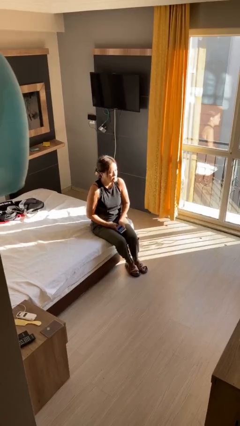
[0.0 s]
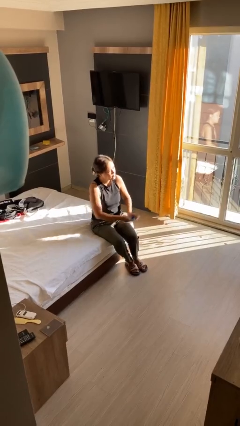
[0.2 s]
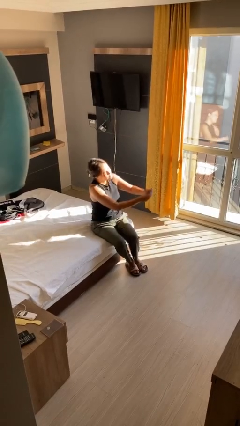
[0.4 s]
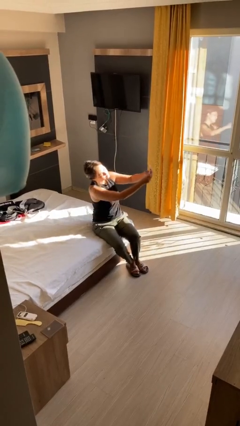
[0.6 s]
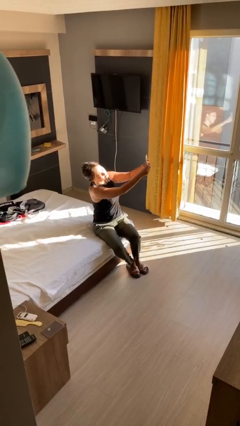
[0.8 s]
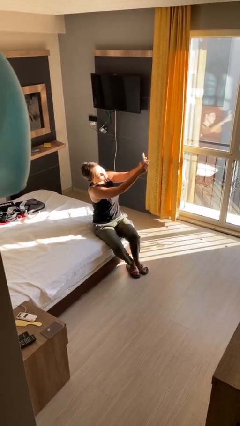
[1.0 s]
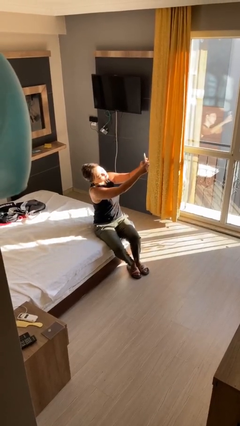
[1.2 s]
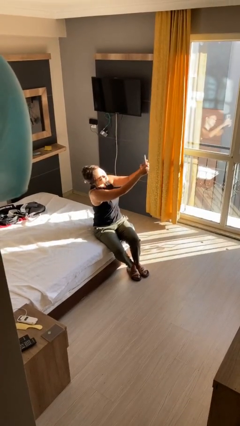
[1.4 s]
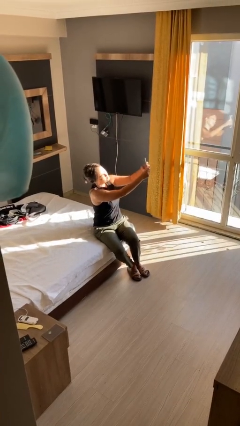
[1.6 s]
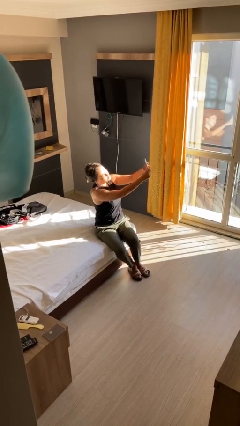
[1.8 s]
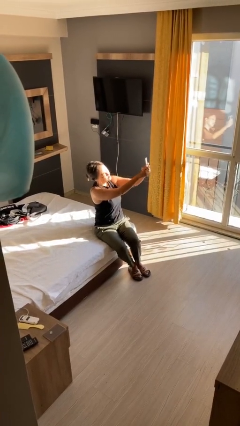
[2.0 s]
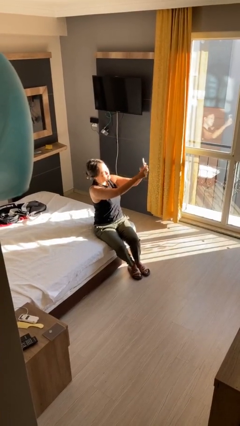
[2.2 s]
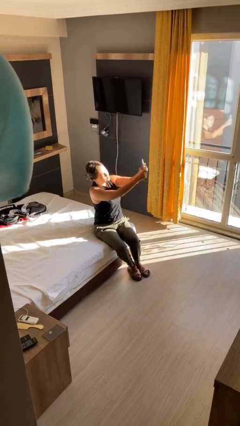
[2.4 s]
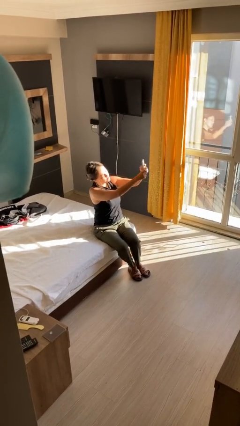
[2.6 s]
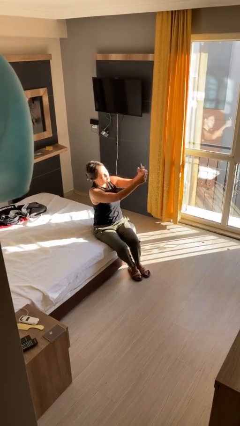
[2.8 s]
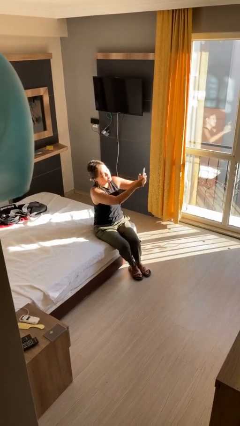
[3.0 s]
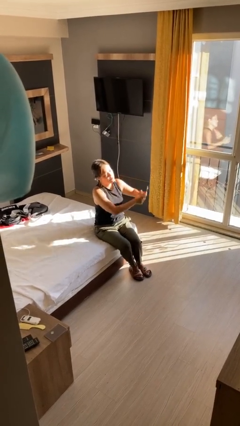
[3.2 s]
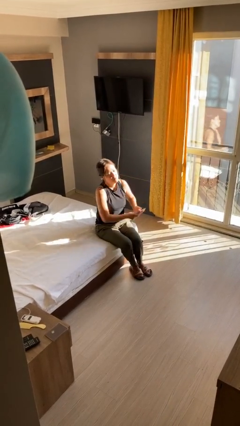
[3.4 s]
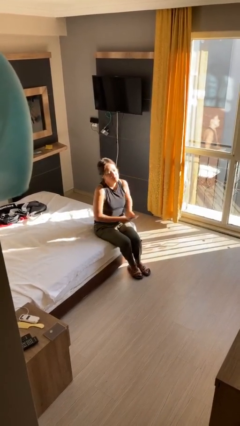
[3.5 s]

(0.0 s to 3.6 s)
person takes selfie

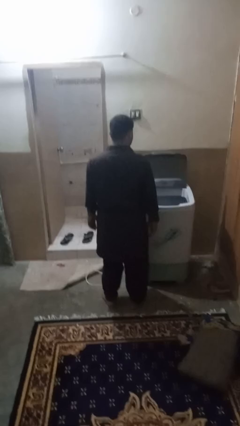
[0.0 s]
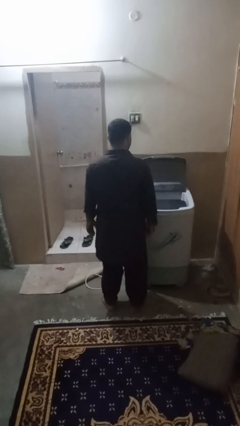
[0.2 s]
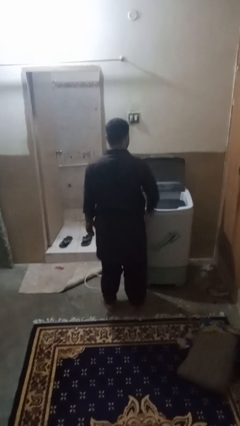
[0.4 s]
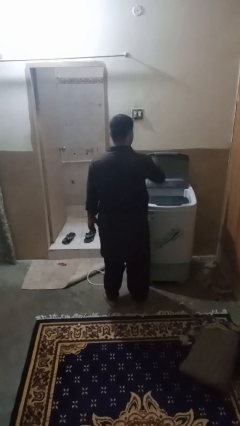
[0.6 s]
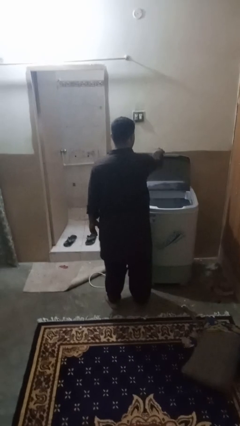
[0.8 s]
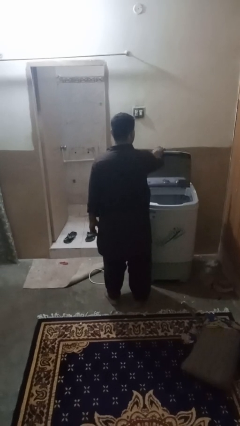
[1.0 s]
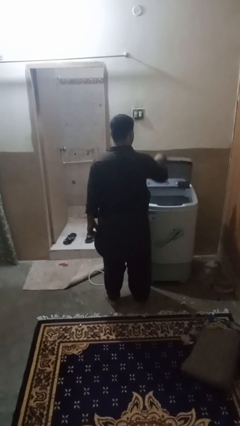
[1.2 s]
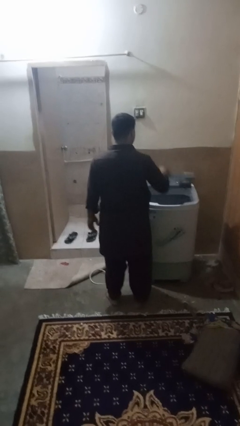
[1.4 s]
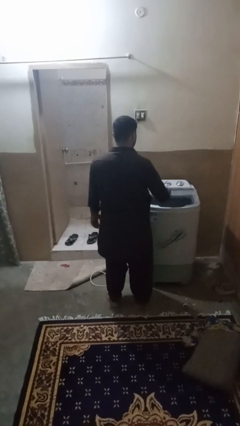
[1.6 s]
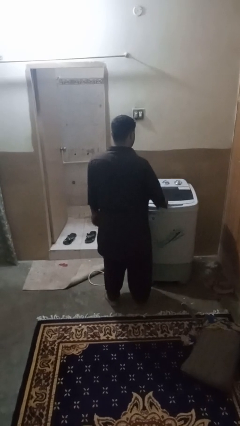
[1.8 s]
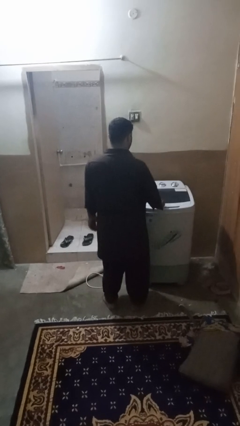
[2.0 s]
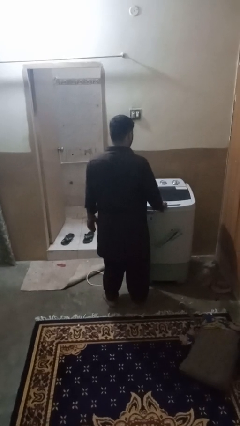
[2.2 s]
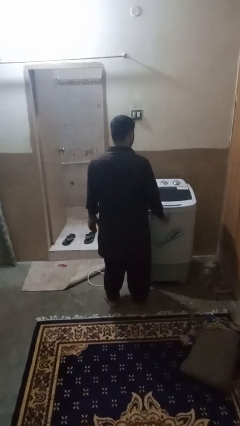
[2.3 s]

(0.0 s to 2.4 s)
person closes clothes washer

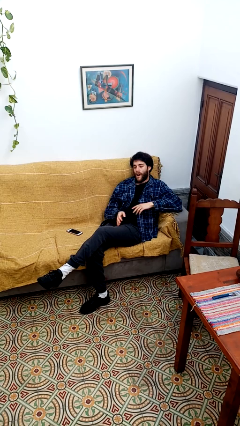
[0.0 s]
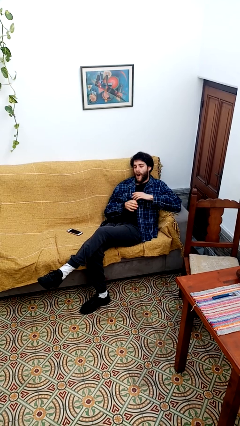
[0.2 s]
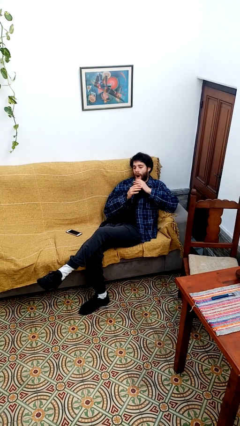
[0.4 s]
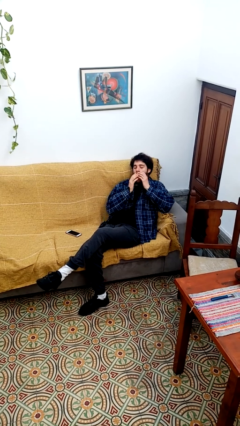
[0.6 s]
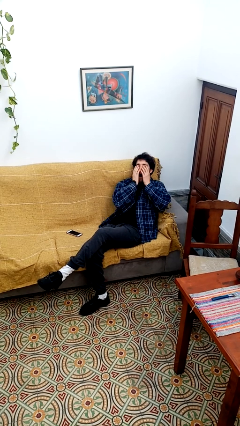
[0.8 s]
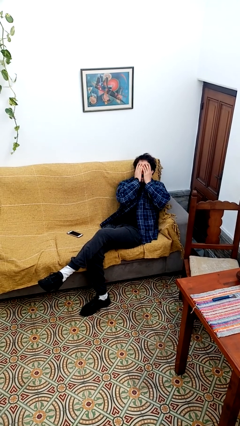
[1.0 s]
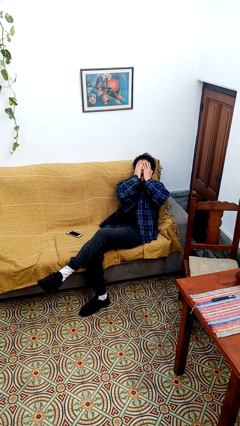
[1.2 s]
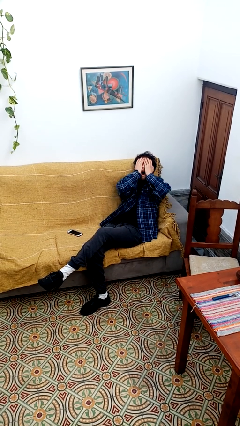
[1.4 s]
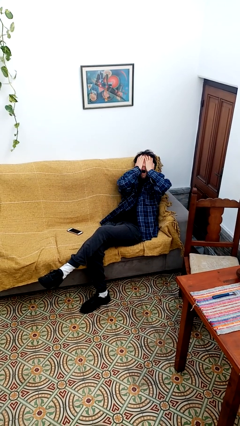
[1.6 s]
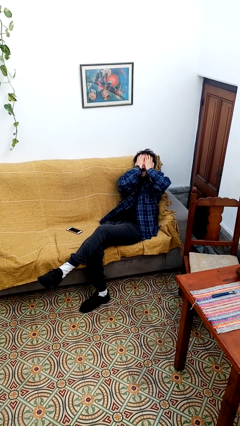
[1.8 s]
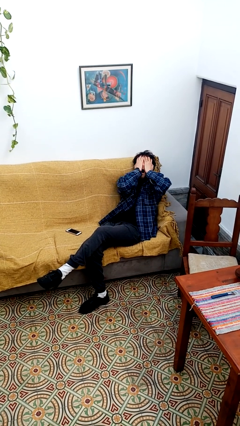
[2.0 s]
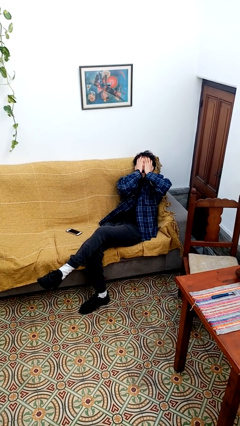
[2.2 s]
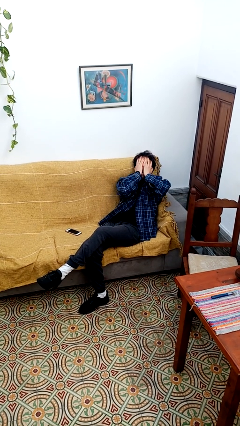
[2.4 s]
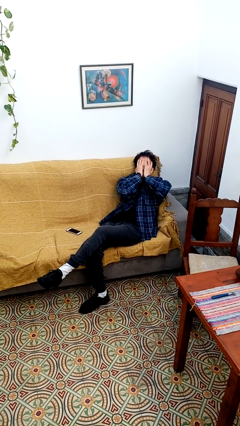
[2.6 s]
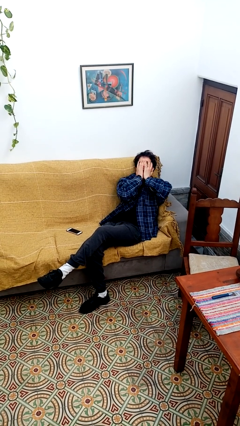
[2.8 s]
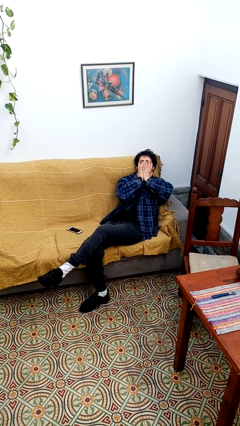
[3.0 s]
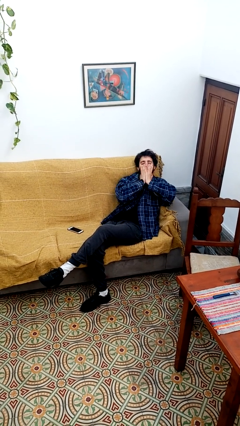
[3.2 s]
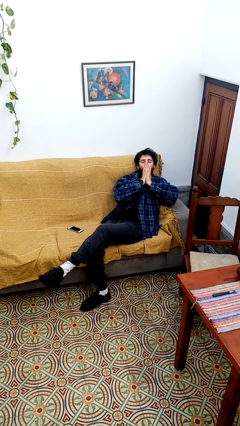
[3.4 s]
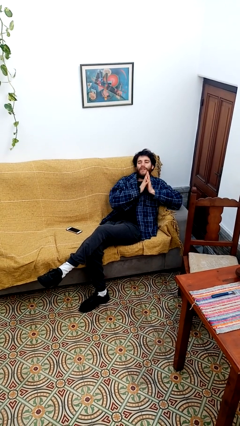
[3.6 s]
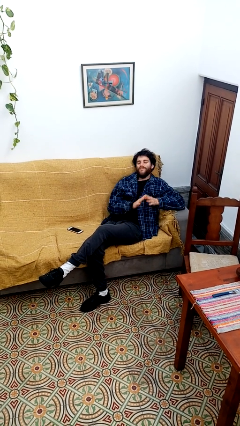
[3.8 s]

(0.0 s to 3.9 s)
person yawns

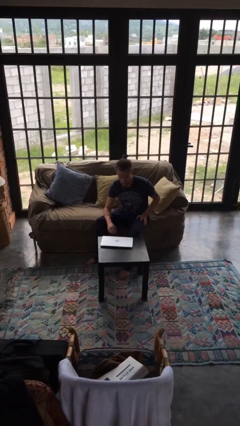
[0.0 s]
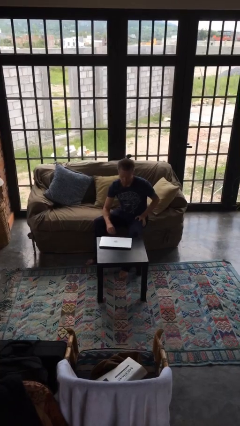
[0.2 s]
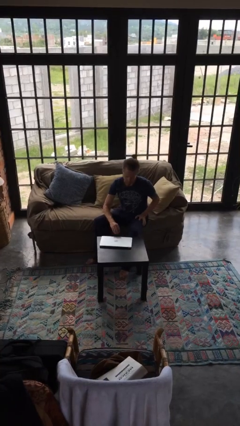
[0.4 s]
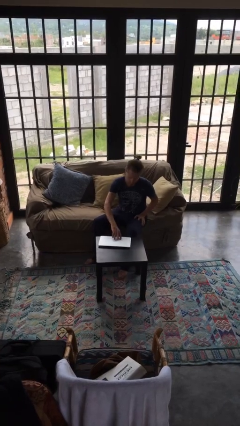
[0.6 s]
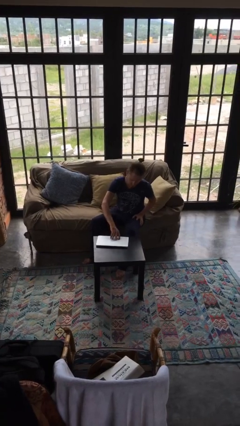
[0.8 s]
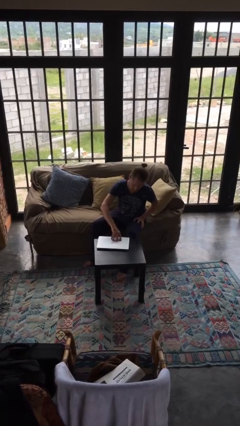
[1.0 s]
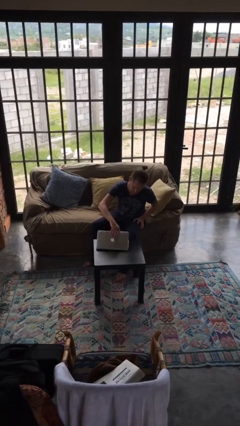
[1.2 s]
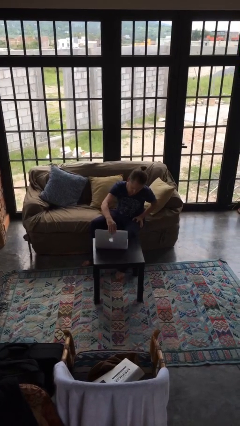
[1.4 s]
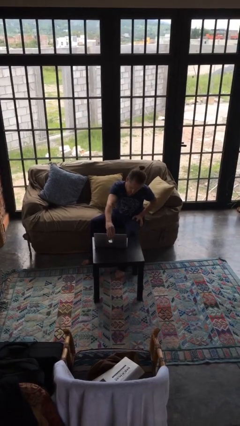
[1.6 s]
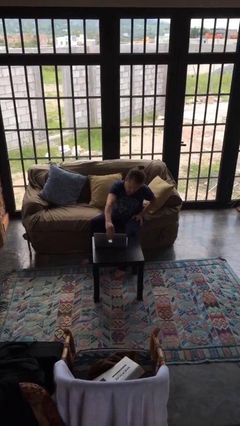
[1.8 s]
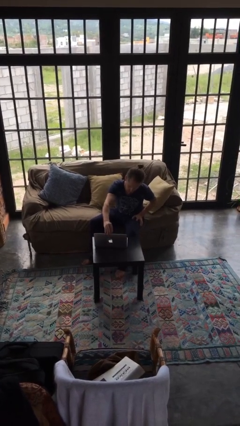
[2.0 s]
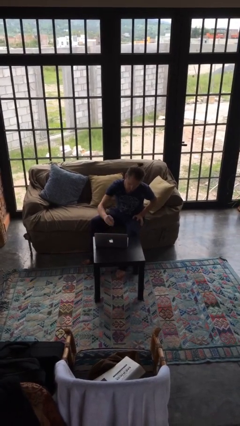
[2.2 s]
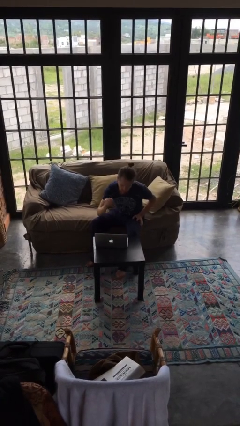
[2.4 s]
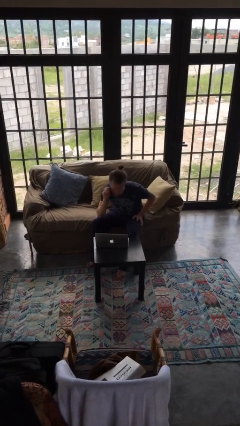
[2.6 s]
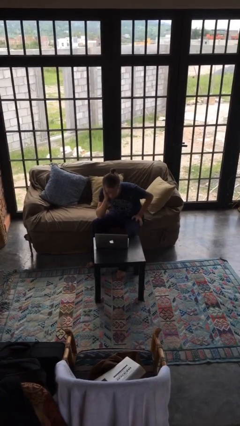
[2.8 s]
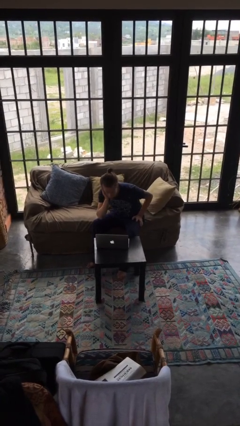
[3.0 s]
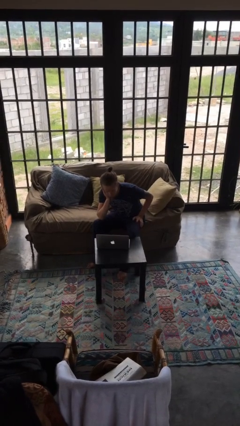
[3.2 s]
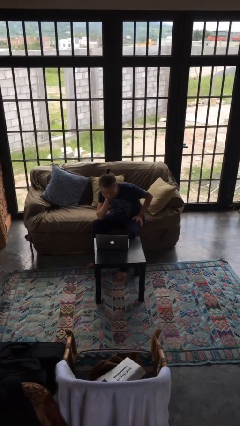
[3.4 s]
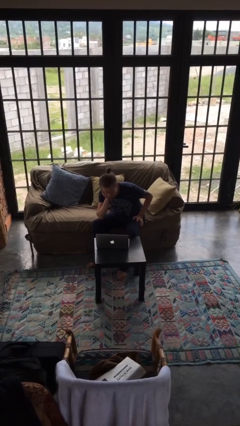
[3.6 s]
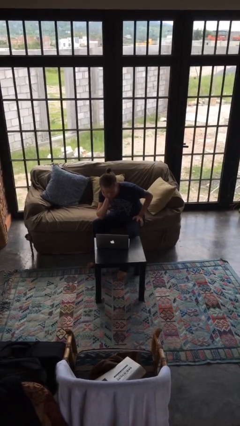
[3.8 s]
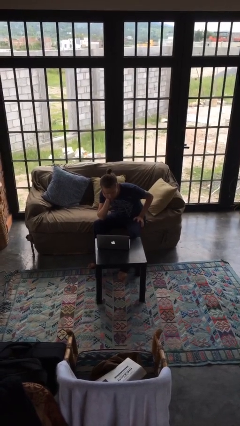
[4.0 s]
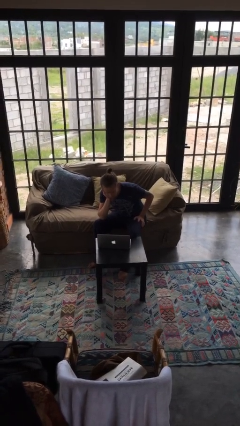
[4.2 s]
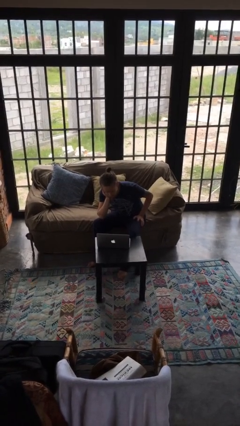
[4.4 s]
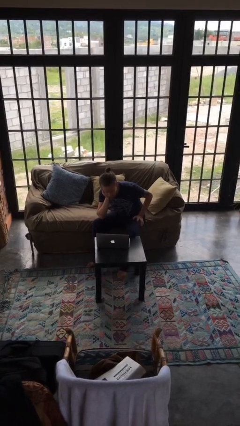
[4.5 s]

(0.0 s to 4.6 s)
person opens laptop

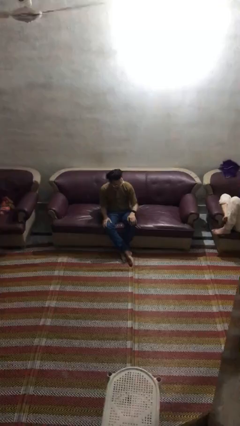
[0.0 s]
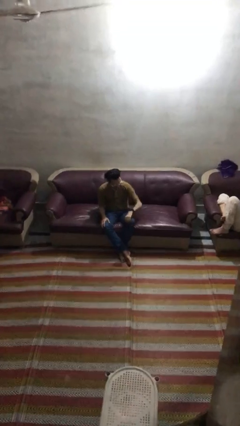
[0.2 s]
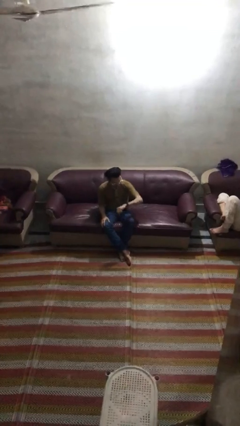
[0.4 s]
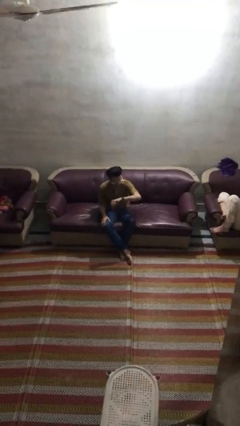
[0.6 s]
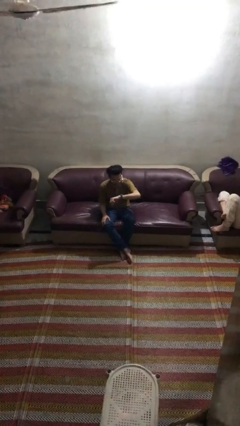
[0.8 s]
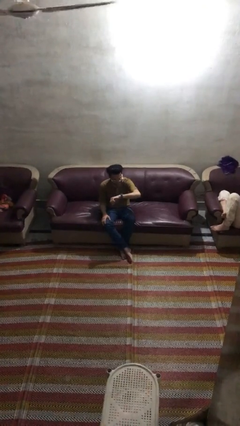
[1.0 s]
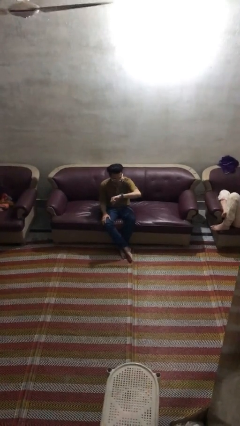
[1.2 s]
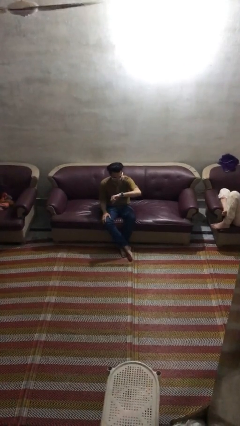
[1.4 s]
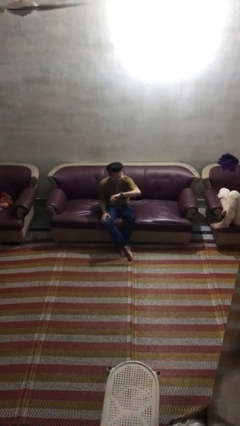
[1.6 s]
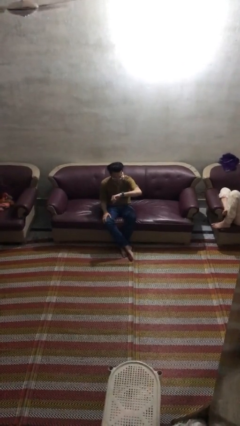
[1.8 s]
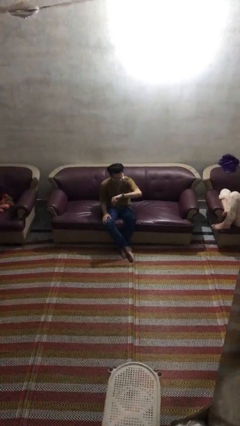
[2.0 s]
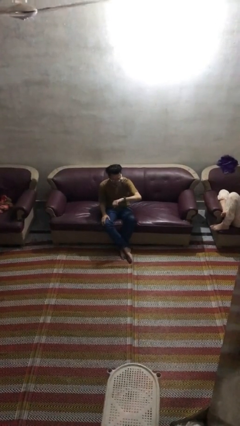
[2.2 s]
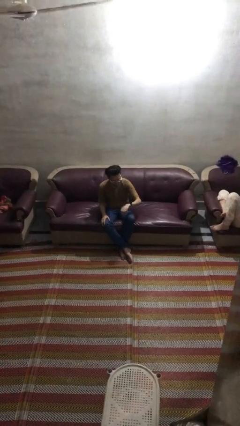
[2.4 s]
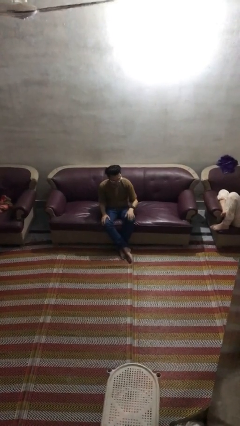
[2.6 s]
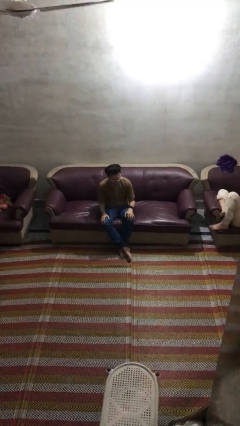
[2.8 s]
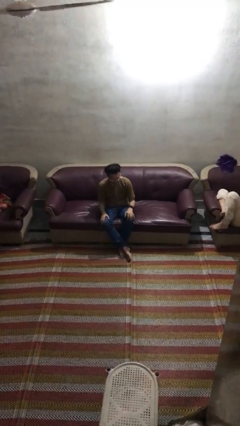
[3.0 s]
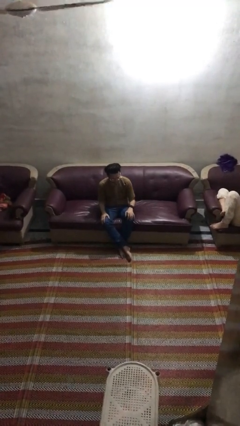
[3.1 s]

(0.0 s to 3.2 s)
person looks at wristwatch
